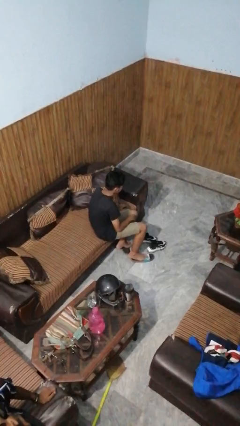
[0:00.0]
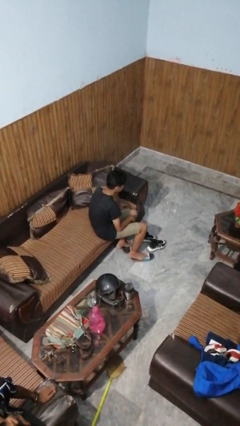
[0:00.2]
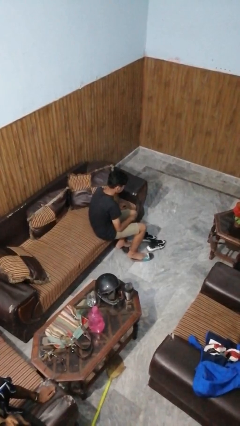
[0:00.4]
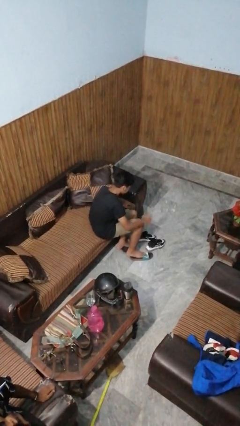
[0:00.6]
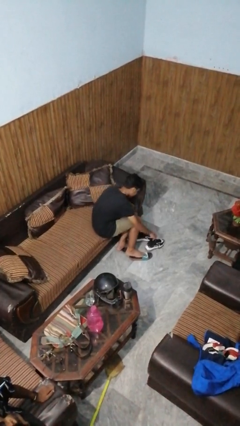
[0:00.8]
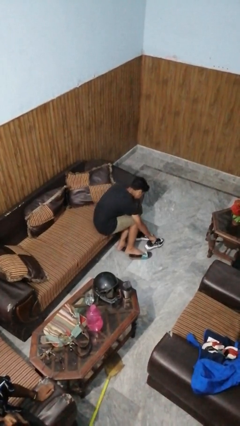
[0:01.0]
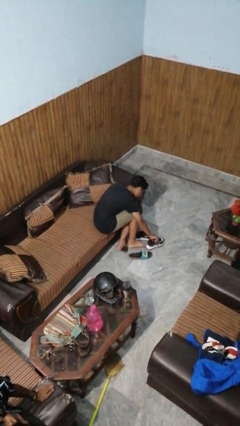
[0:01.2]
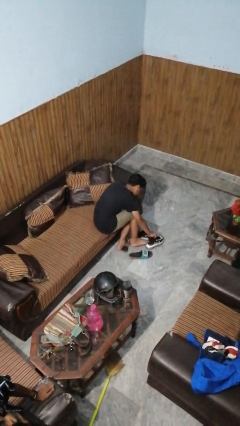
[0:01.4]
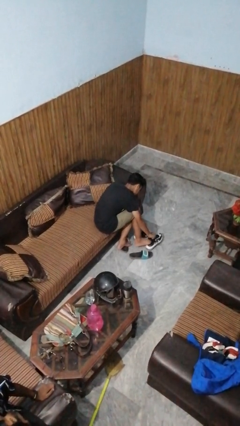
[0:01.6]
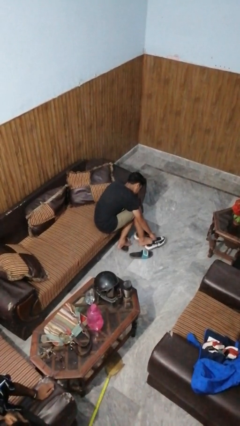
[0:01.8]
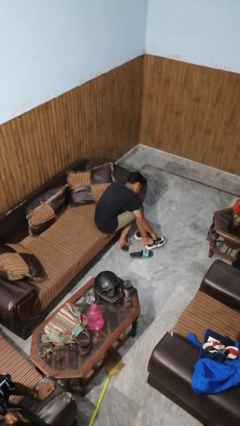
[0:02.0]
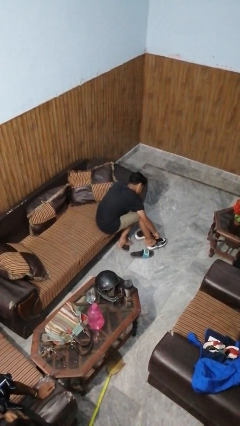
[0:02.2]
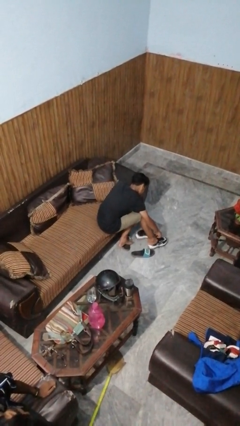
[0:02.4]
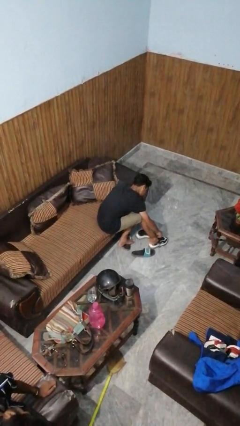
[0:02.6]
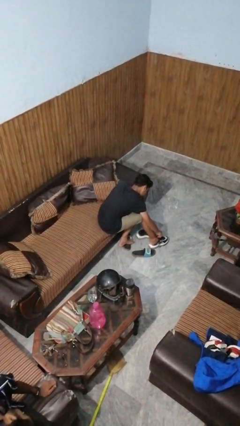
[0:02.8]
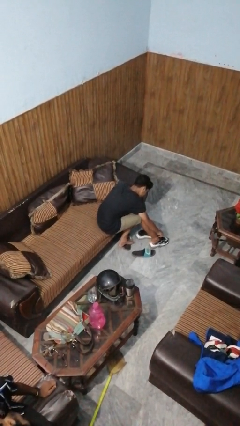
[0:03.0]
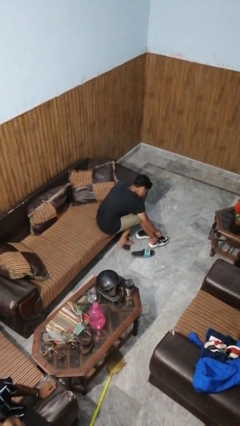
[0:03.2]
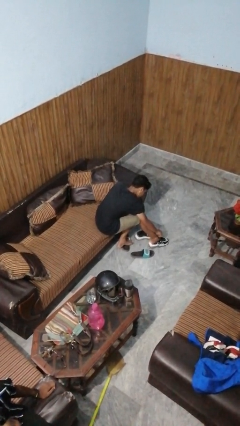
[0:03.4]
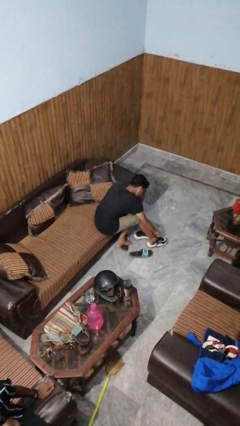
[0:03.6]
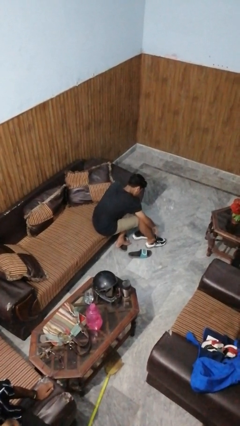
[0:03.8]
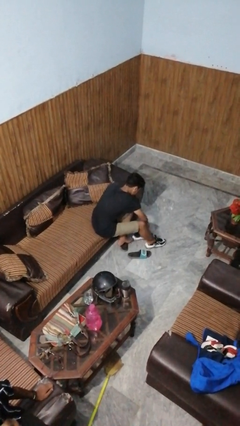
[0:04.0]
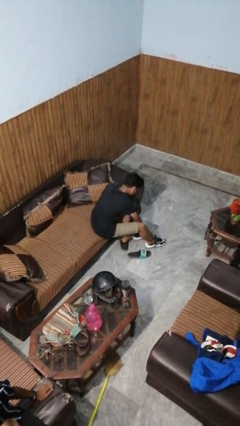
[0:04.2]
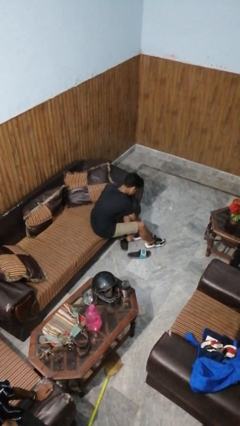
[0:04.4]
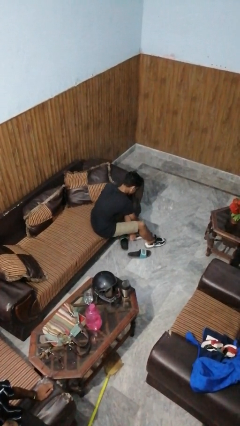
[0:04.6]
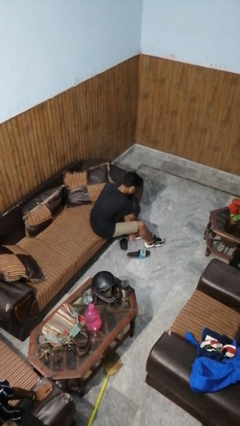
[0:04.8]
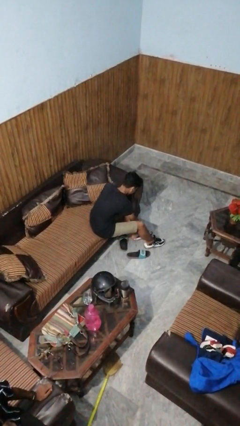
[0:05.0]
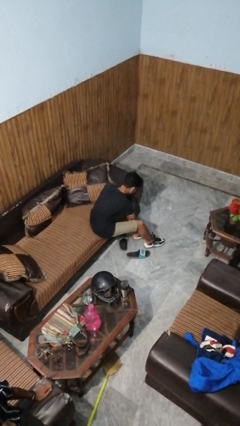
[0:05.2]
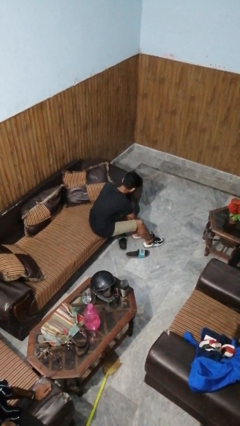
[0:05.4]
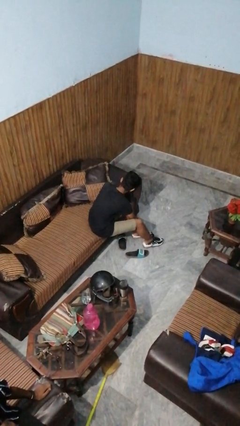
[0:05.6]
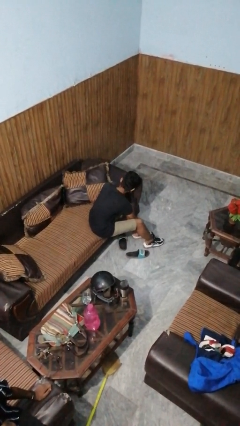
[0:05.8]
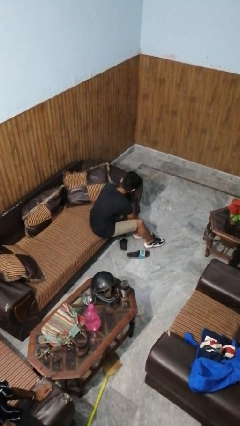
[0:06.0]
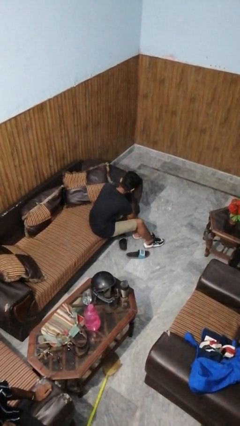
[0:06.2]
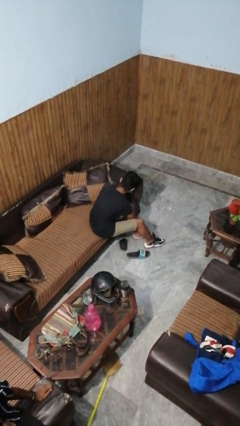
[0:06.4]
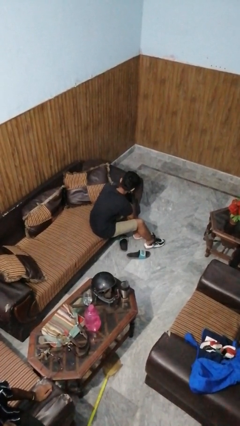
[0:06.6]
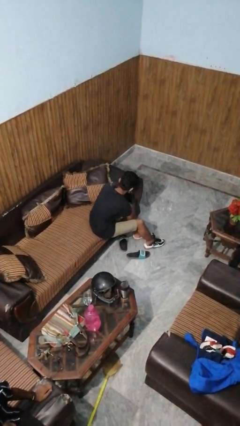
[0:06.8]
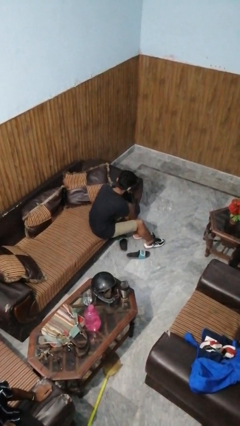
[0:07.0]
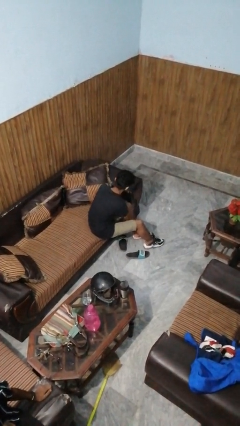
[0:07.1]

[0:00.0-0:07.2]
person puts on shoes

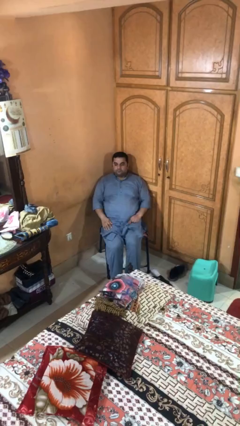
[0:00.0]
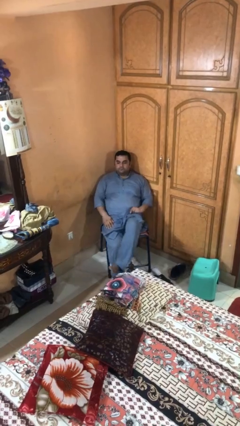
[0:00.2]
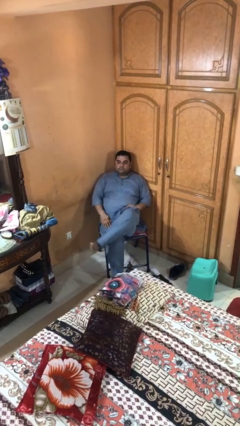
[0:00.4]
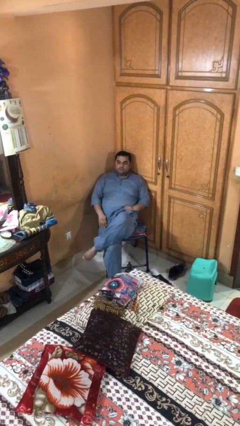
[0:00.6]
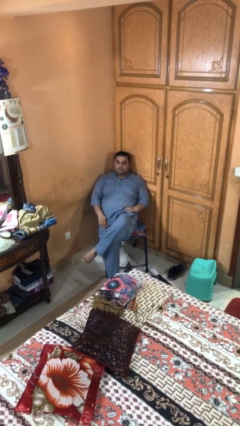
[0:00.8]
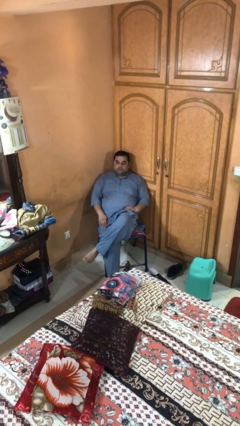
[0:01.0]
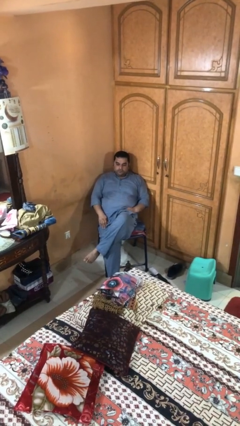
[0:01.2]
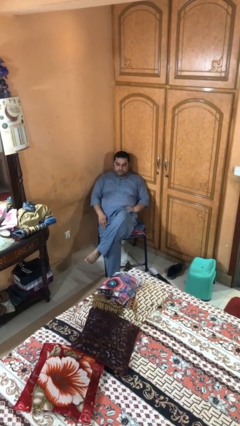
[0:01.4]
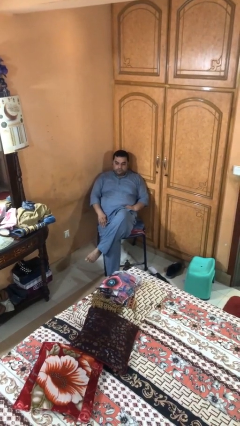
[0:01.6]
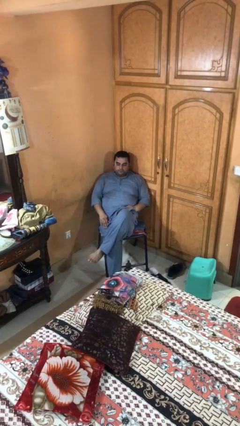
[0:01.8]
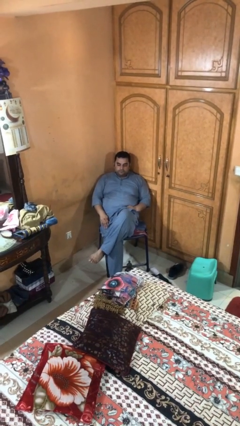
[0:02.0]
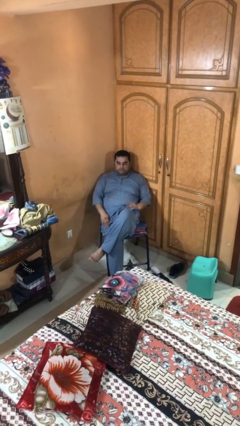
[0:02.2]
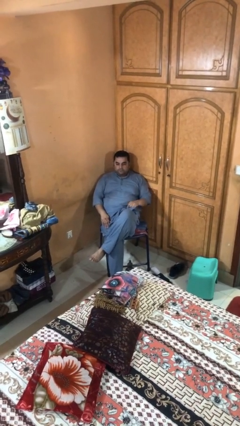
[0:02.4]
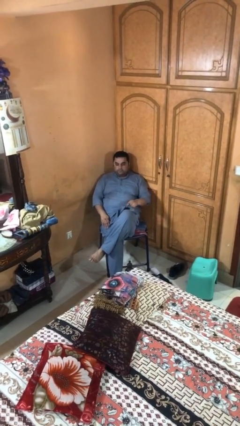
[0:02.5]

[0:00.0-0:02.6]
person crosses legs

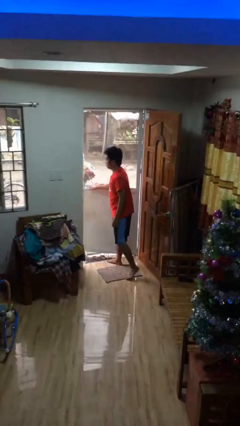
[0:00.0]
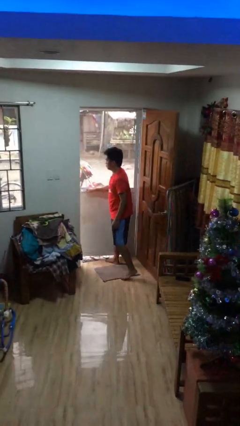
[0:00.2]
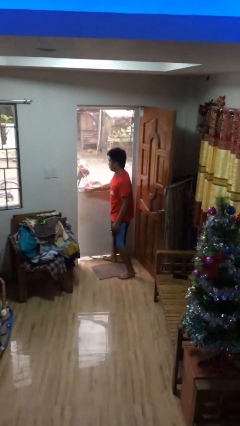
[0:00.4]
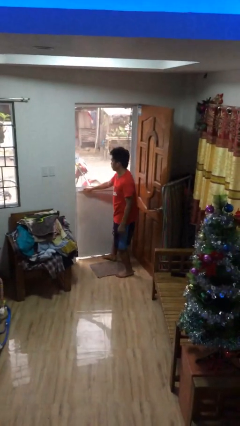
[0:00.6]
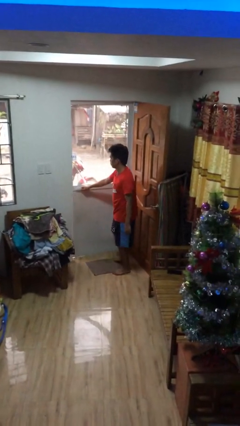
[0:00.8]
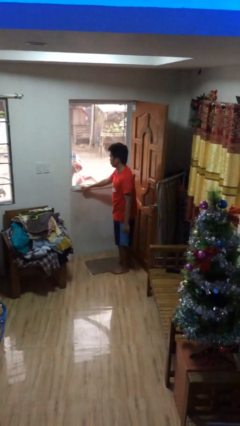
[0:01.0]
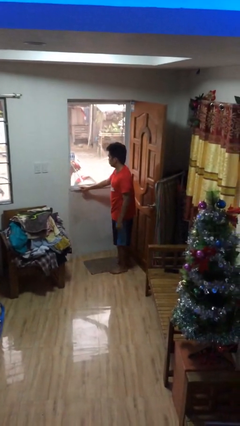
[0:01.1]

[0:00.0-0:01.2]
person closes facility door

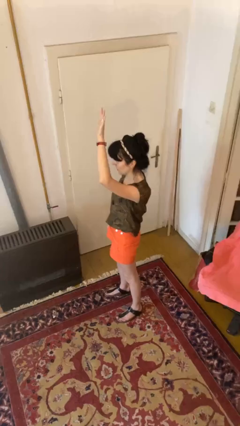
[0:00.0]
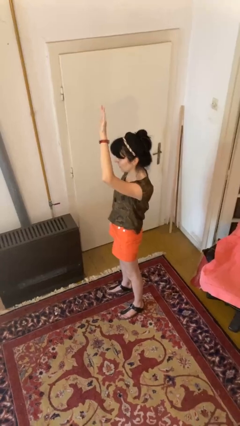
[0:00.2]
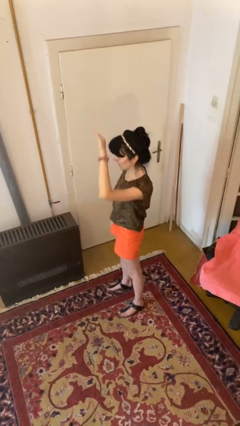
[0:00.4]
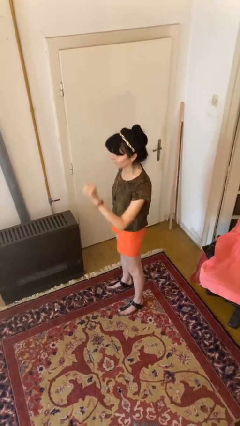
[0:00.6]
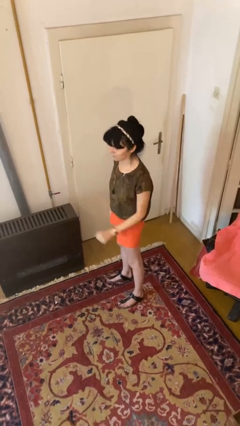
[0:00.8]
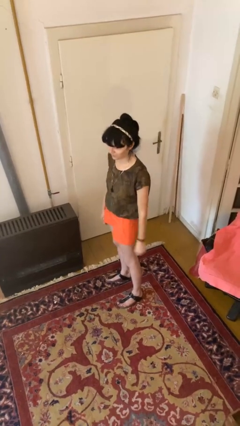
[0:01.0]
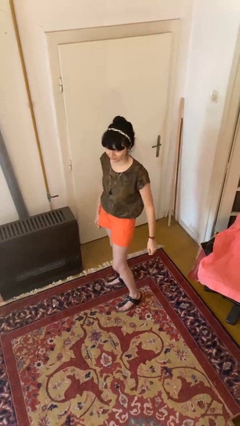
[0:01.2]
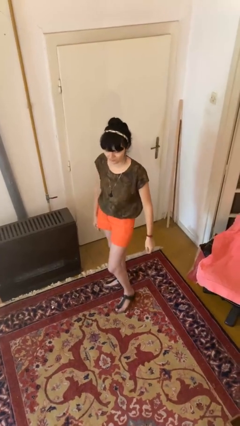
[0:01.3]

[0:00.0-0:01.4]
person gestures lower hand

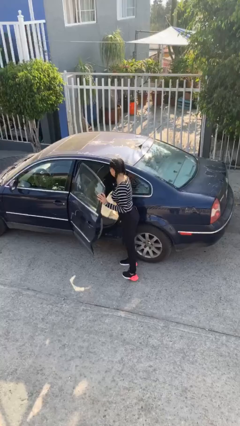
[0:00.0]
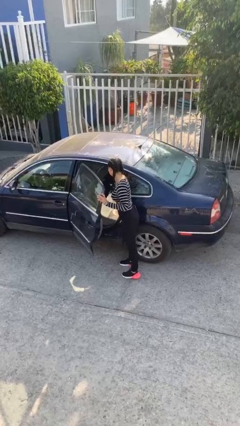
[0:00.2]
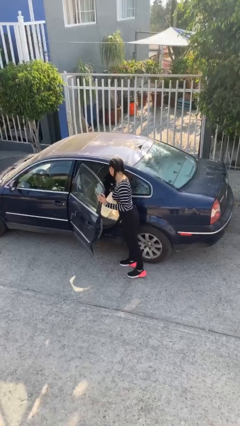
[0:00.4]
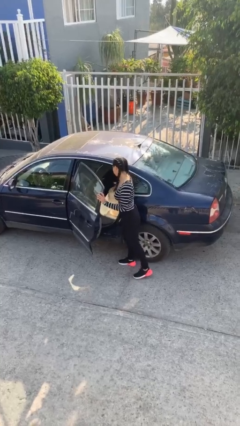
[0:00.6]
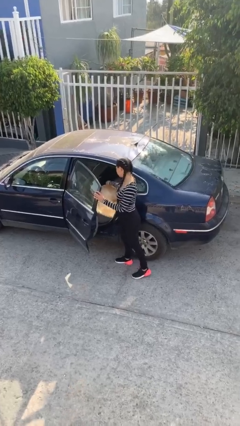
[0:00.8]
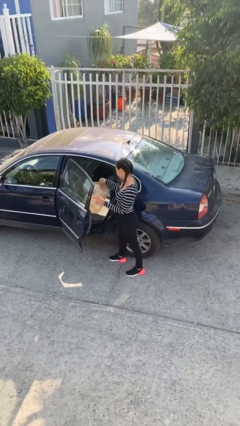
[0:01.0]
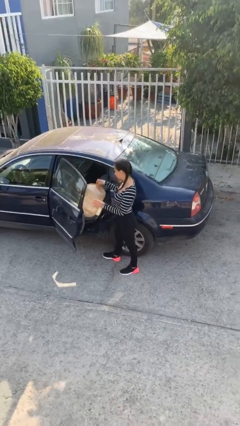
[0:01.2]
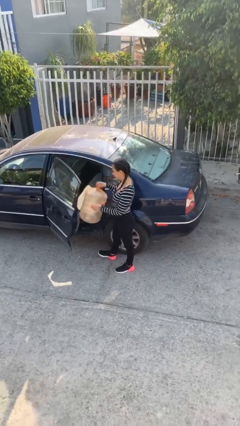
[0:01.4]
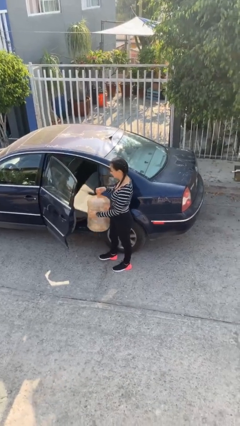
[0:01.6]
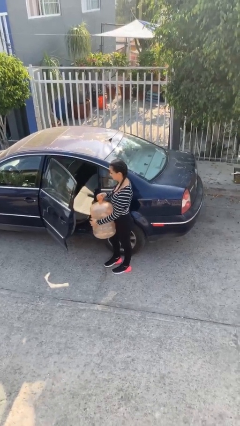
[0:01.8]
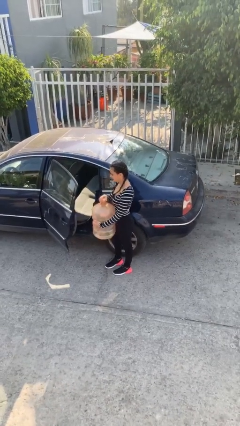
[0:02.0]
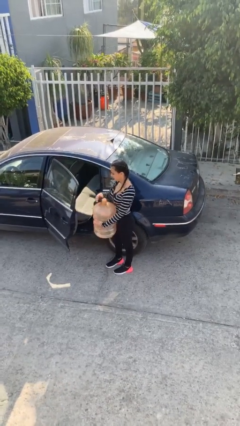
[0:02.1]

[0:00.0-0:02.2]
person unloads car

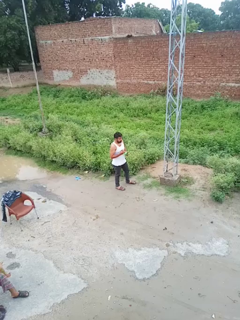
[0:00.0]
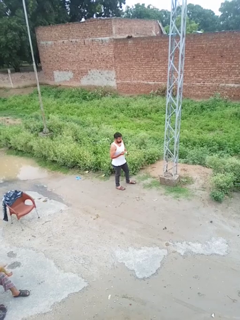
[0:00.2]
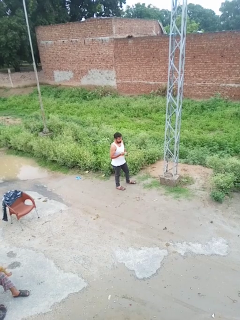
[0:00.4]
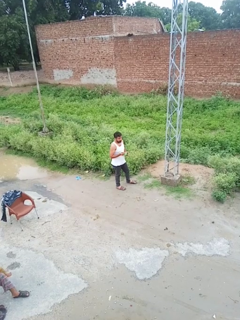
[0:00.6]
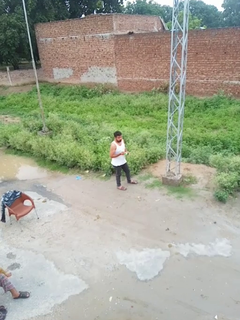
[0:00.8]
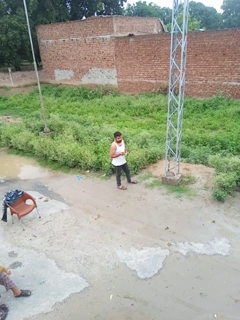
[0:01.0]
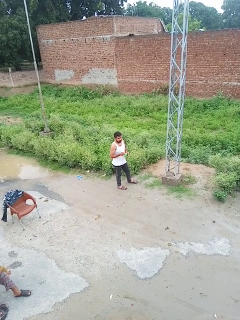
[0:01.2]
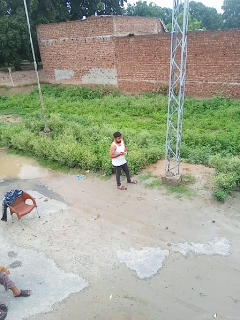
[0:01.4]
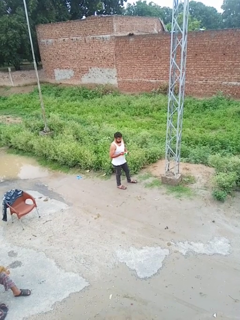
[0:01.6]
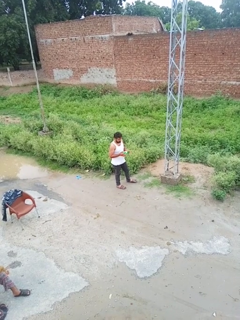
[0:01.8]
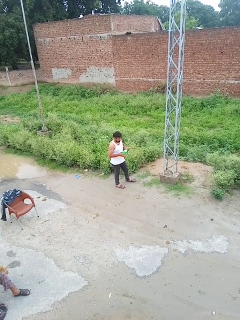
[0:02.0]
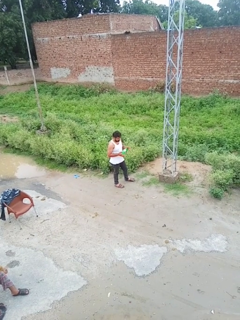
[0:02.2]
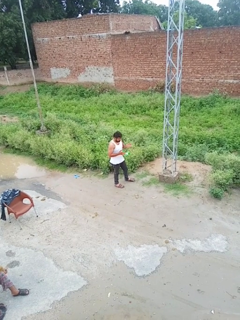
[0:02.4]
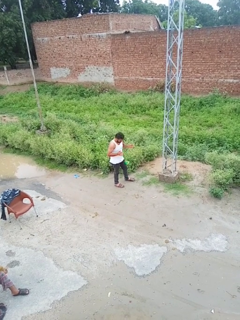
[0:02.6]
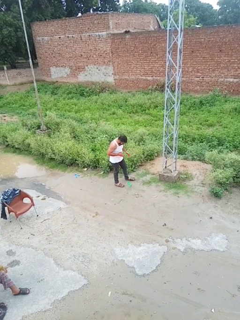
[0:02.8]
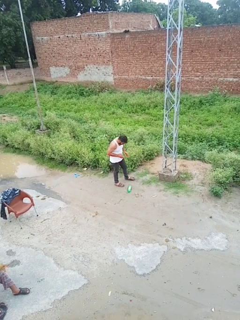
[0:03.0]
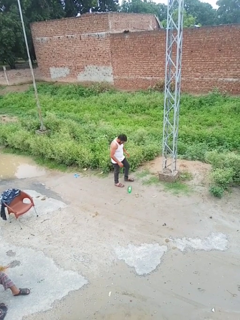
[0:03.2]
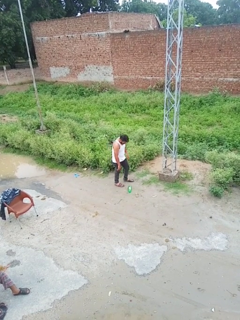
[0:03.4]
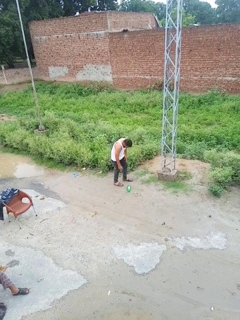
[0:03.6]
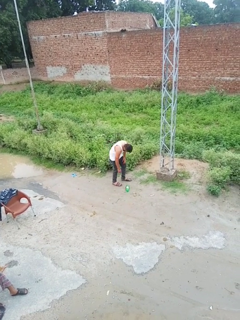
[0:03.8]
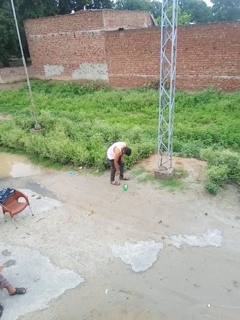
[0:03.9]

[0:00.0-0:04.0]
person drops object
